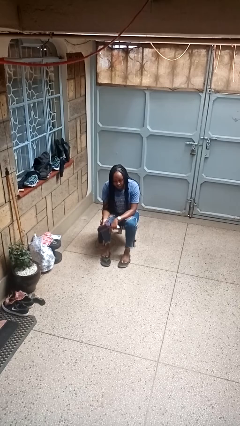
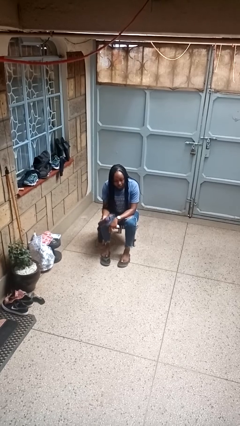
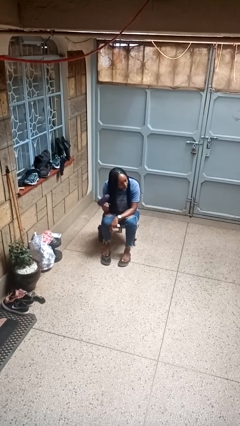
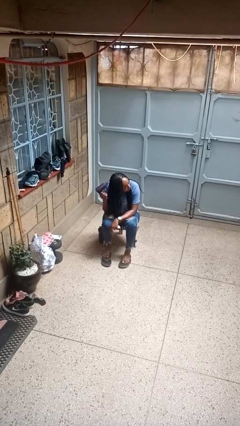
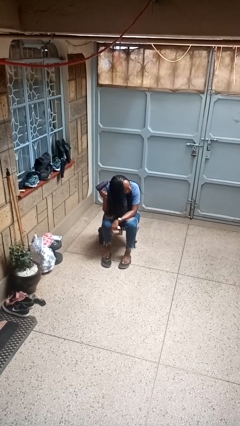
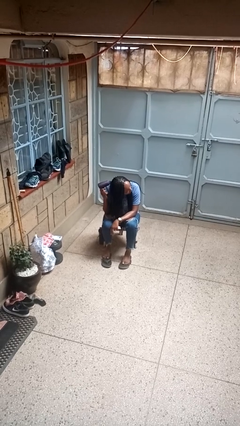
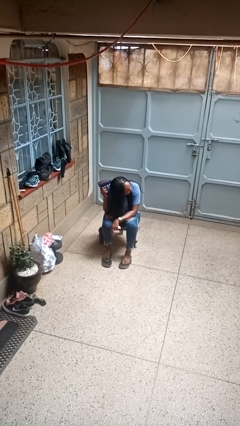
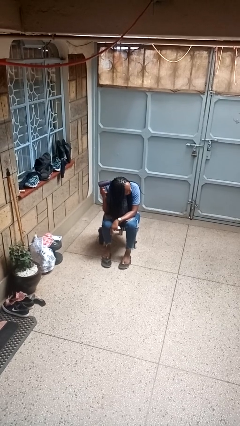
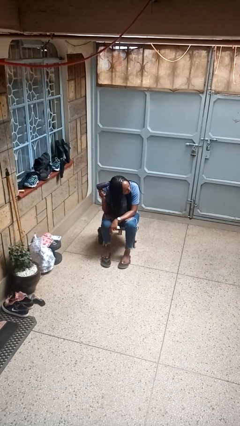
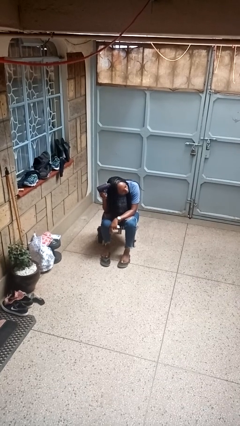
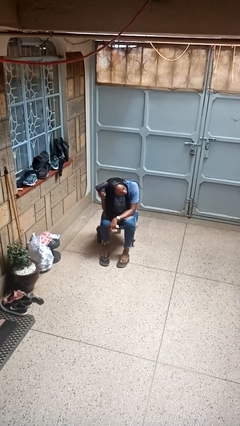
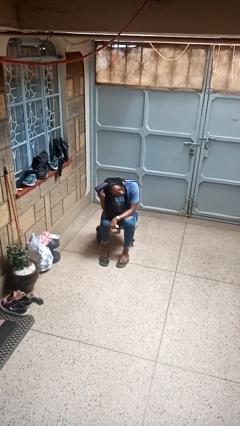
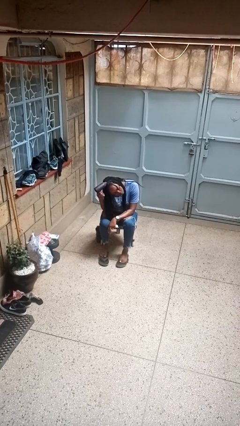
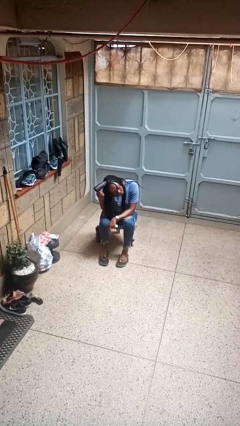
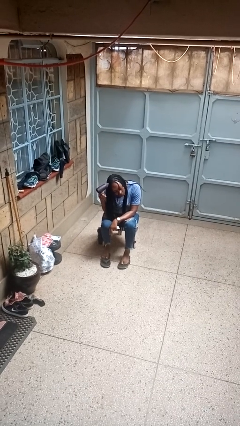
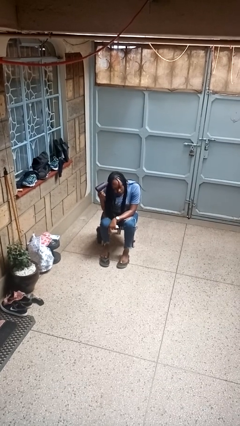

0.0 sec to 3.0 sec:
person dries hair with hairdryer

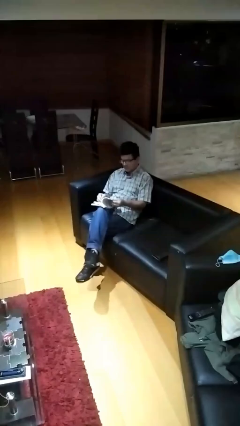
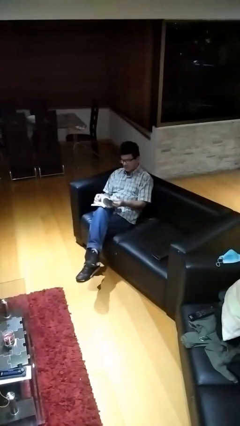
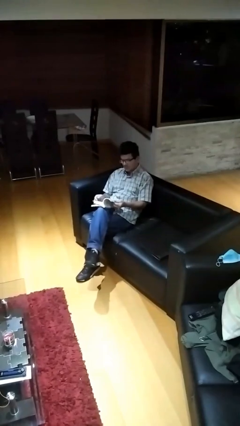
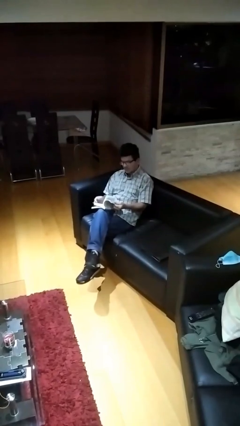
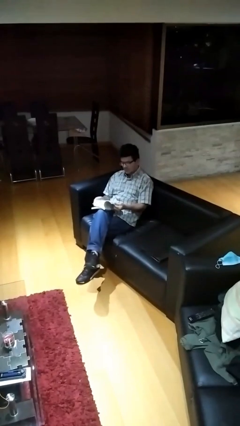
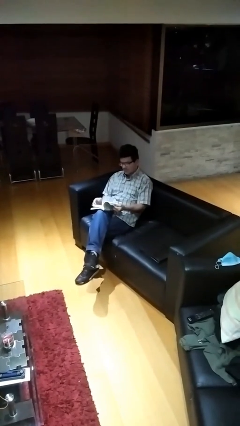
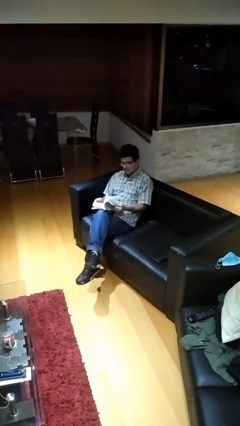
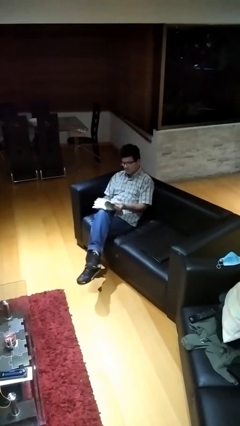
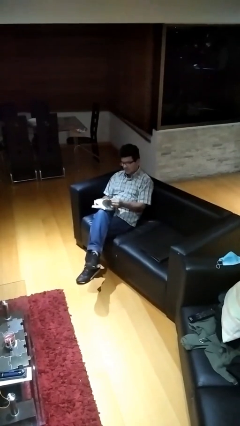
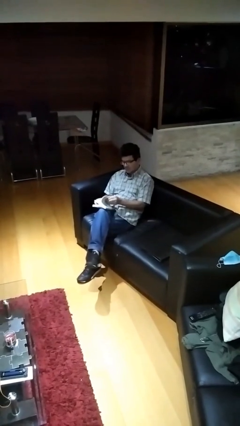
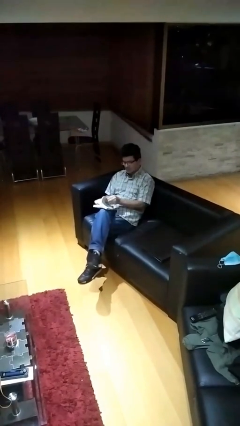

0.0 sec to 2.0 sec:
person reads document

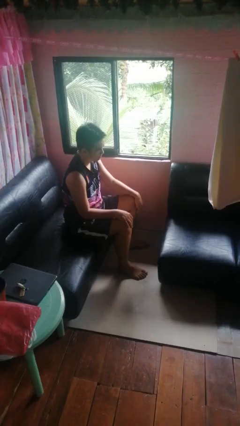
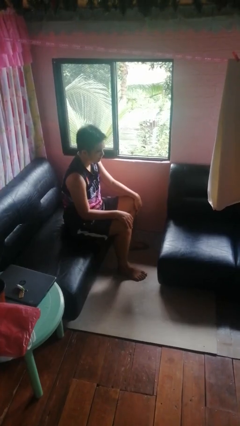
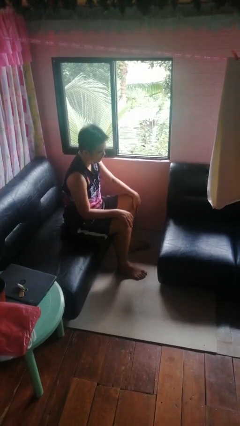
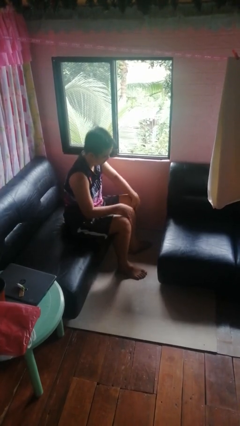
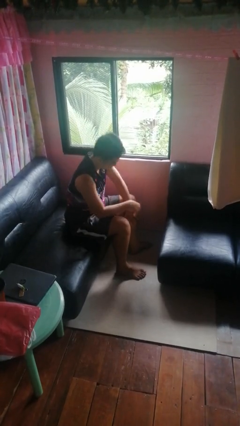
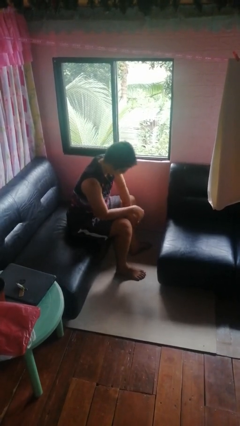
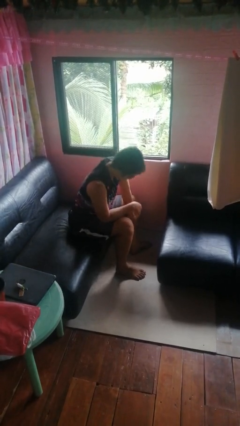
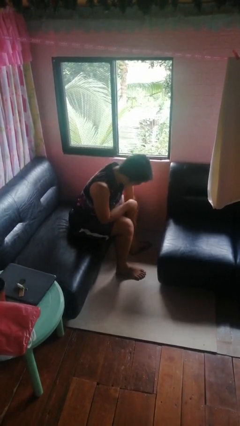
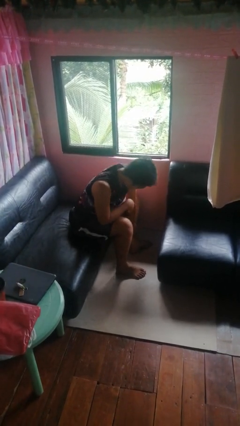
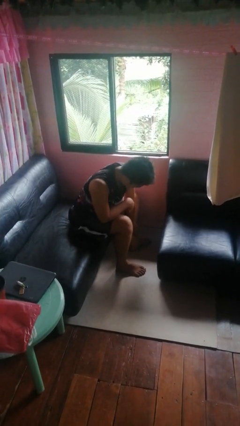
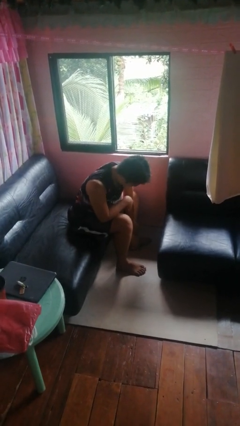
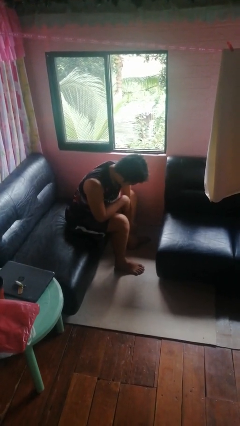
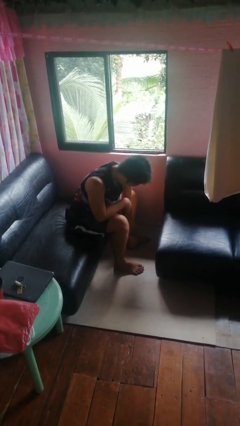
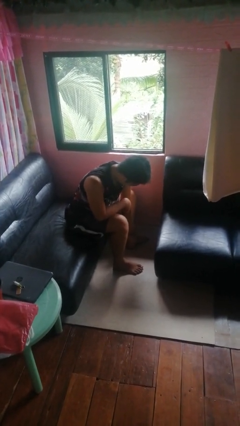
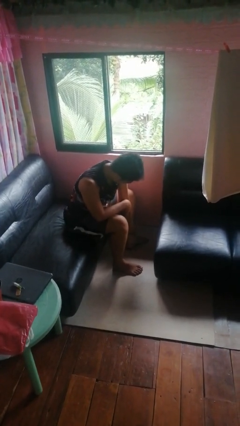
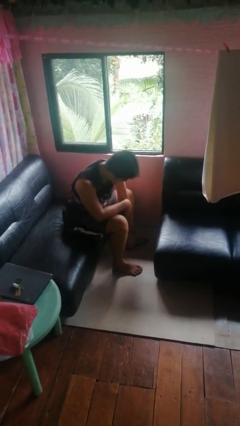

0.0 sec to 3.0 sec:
person rubs foot

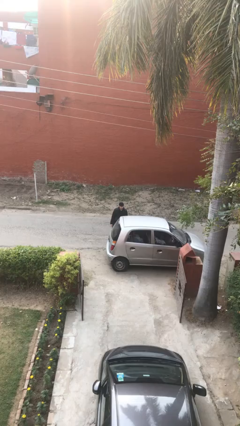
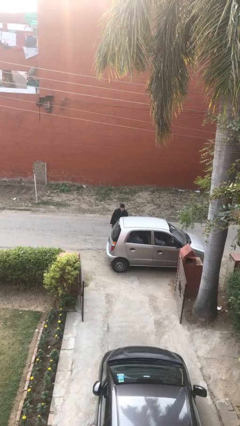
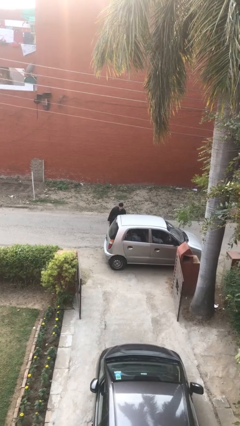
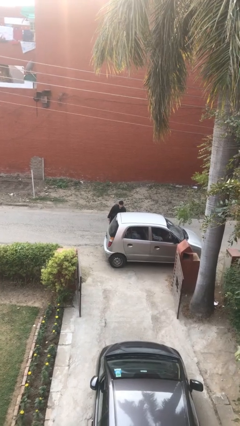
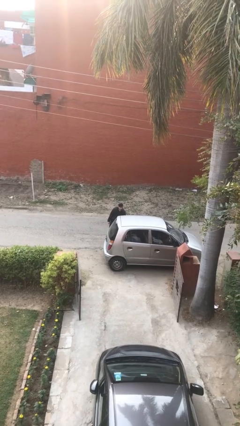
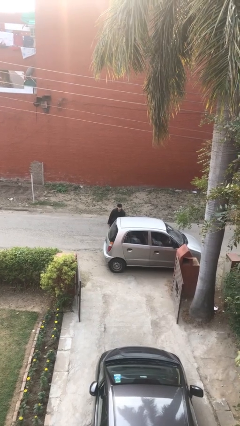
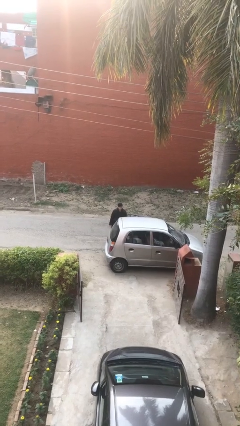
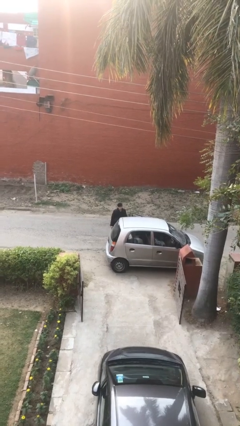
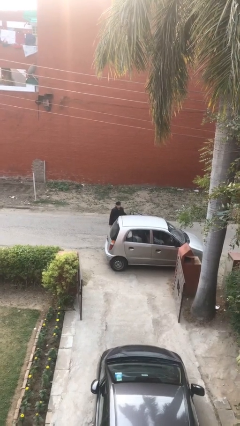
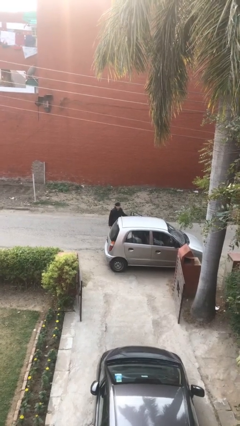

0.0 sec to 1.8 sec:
person opens car door

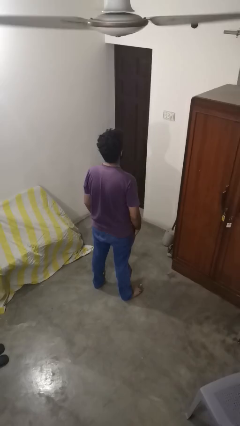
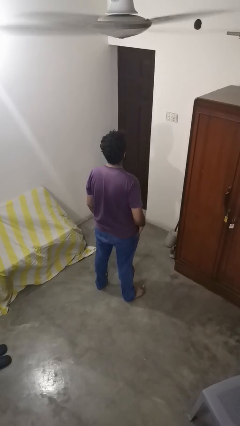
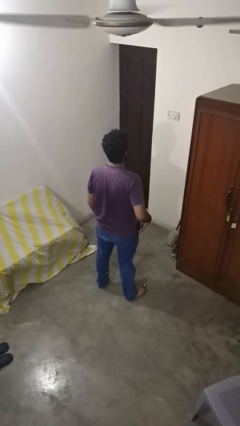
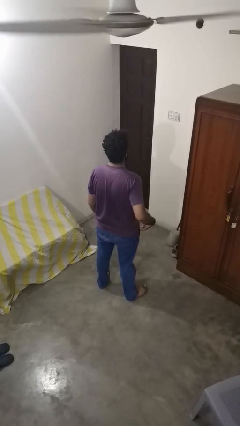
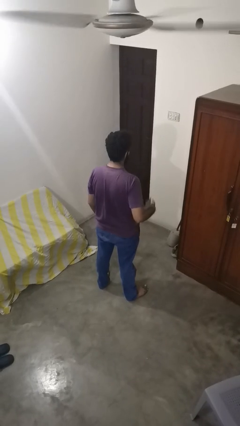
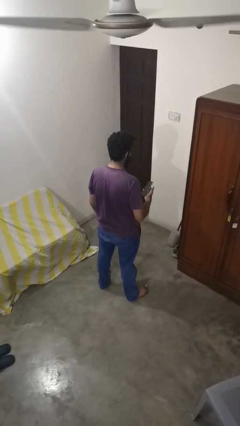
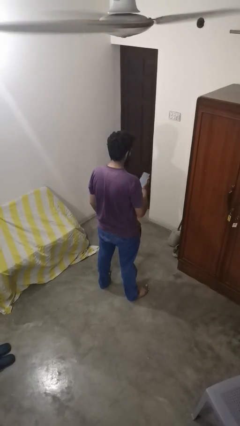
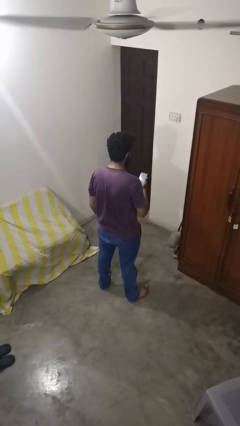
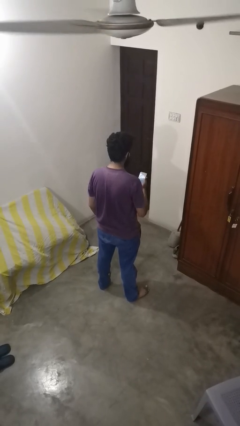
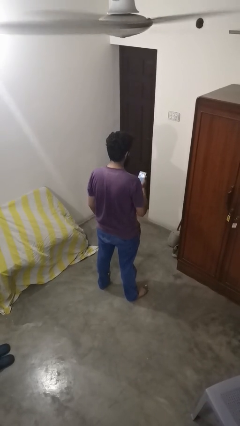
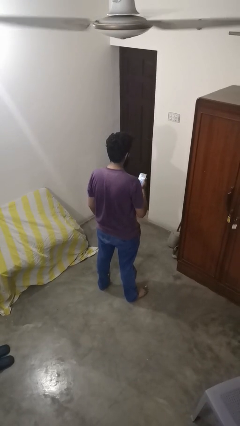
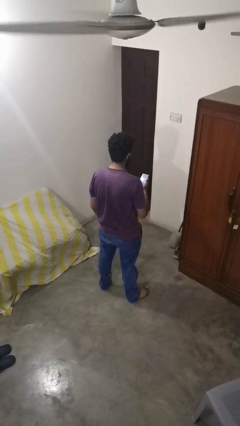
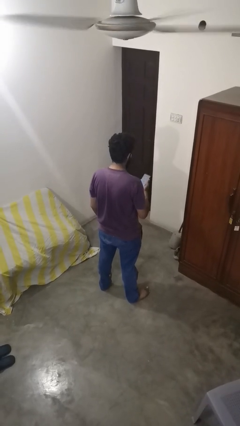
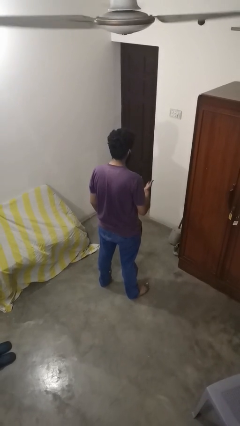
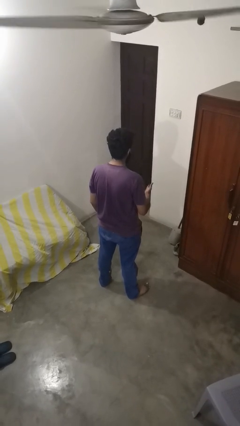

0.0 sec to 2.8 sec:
person takes phone from pocket

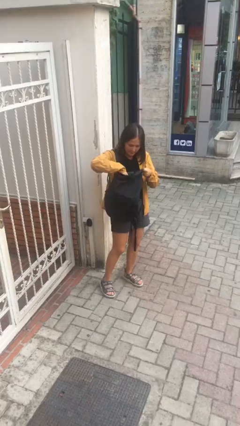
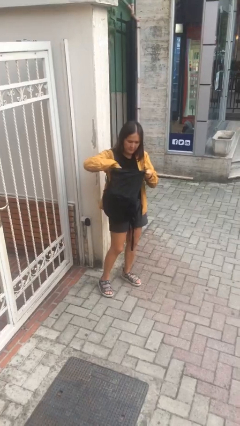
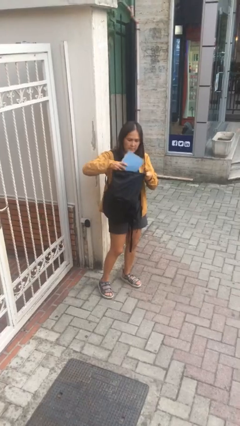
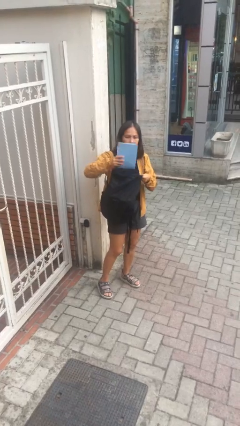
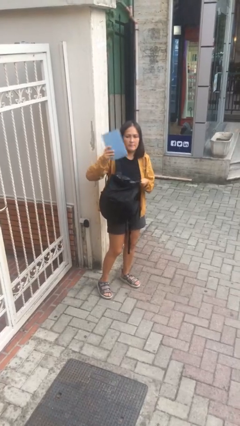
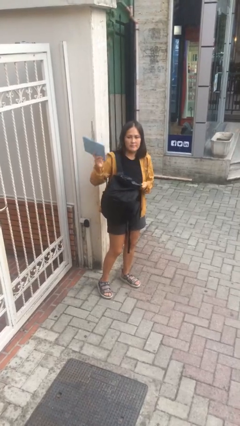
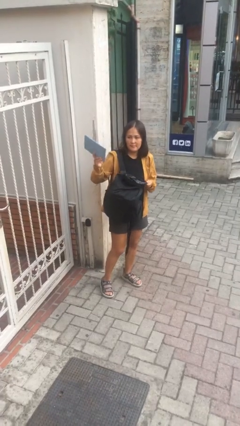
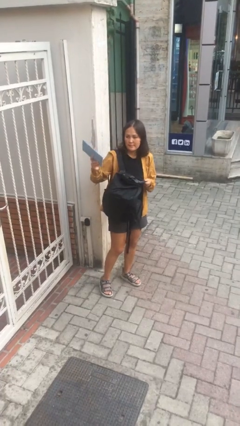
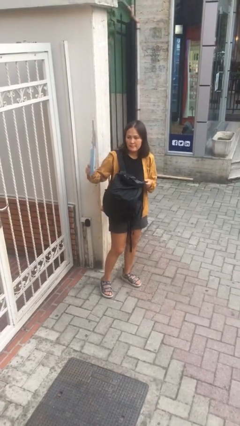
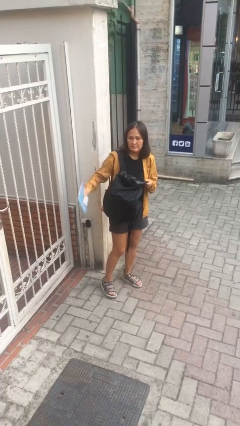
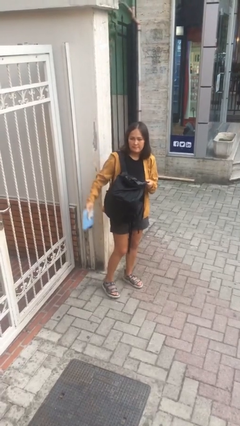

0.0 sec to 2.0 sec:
person takes object from backpack

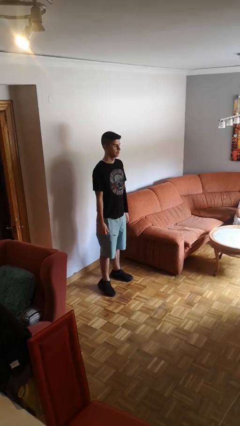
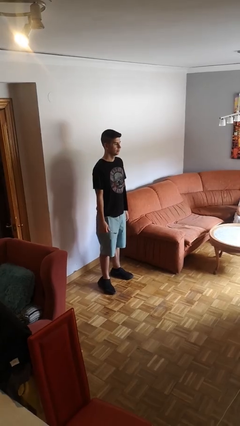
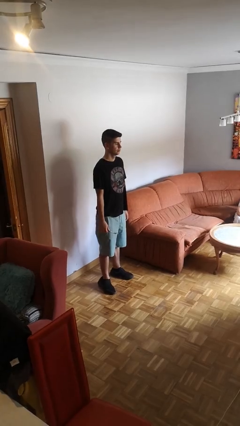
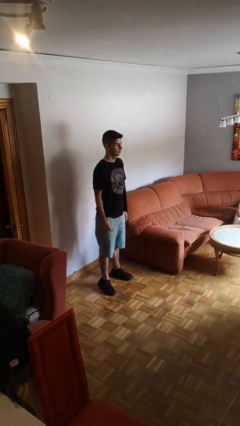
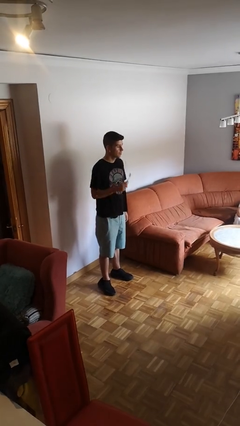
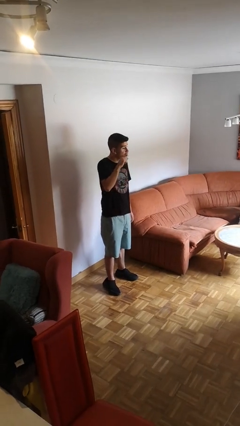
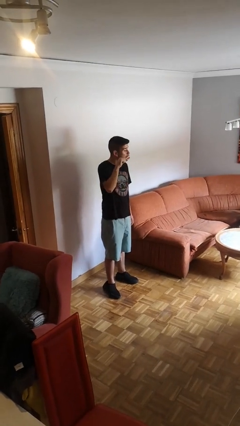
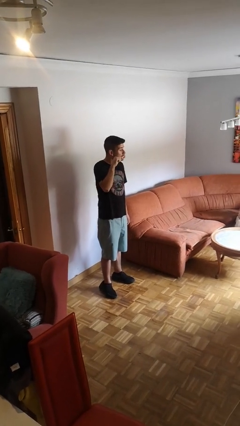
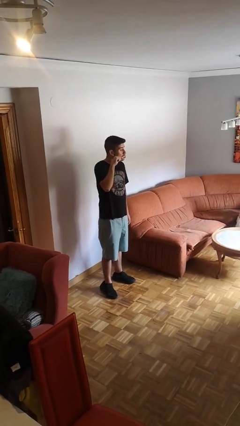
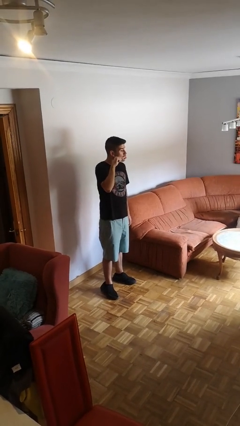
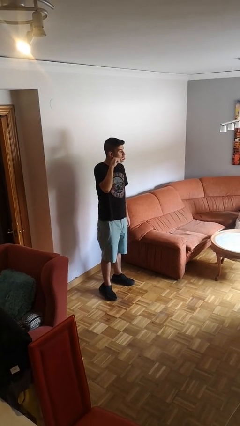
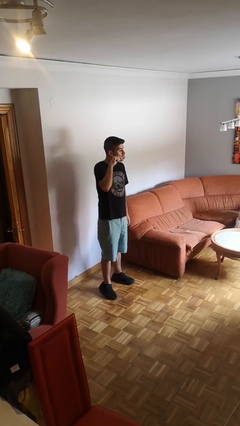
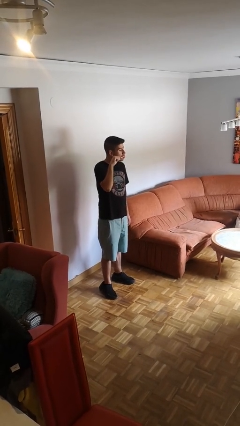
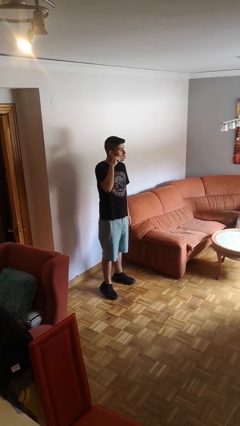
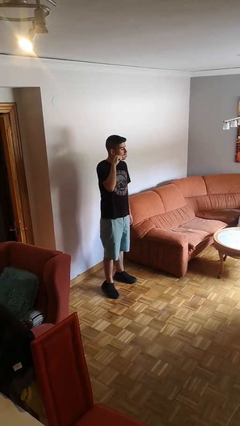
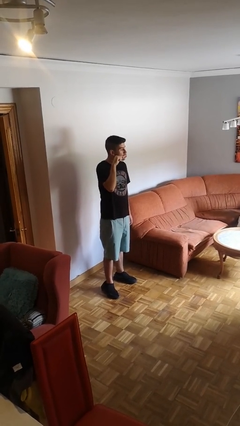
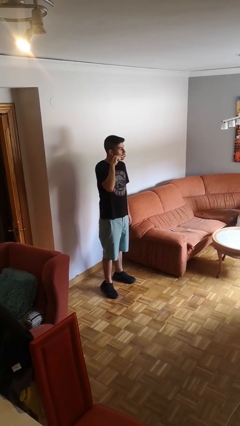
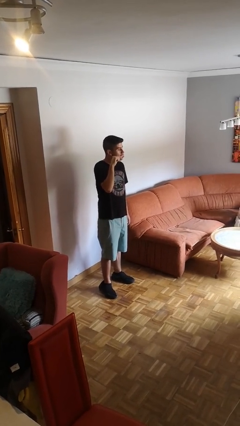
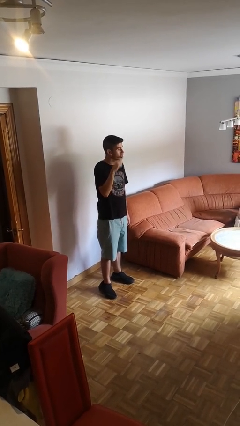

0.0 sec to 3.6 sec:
person brushes teeth
